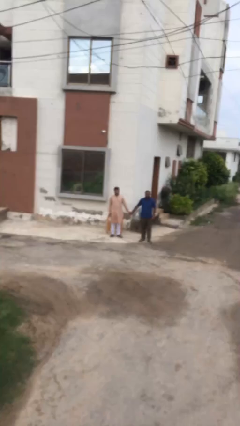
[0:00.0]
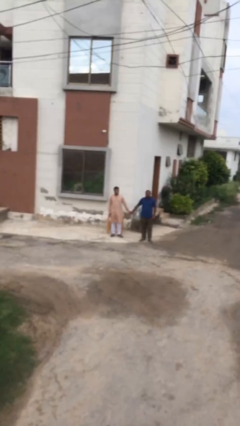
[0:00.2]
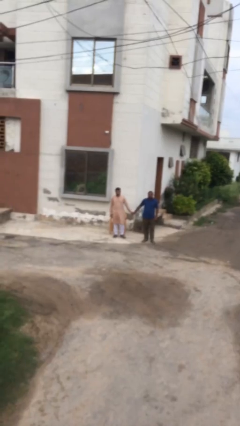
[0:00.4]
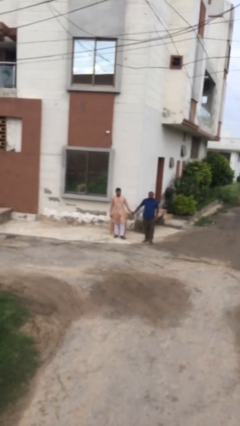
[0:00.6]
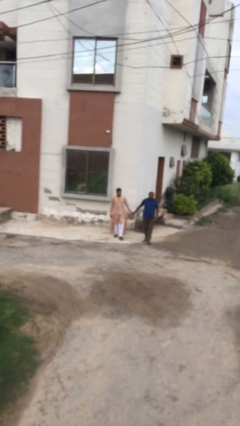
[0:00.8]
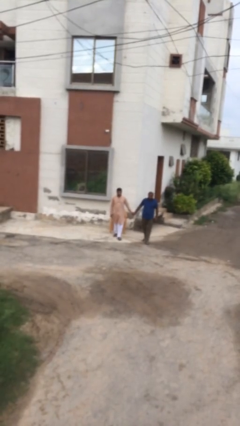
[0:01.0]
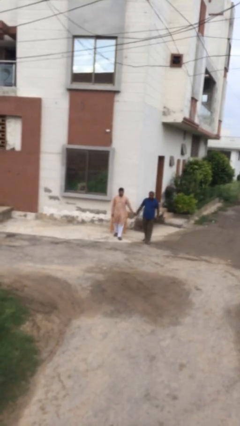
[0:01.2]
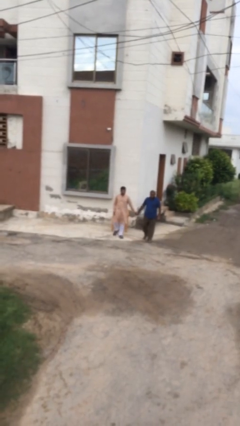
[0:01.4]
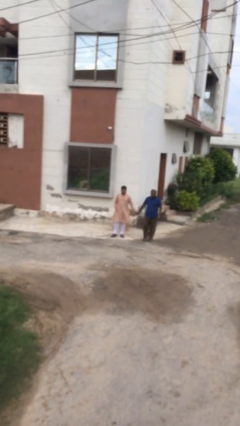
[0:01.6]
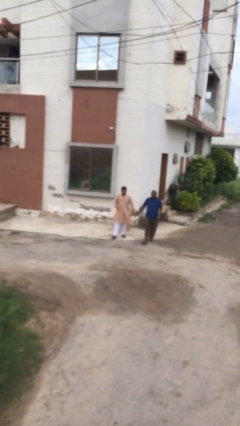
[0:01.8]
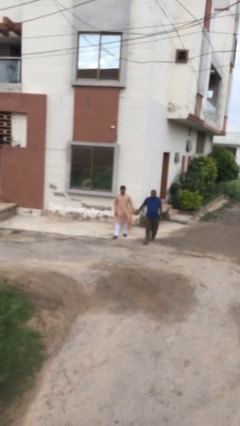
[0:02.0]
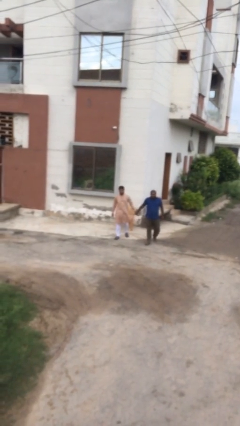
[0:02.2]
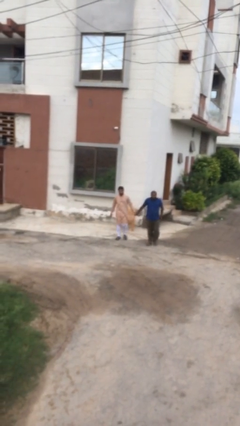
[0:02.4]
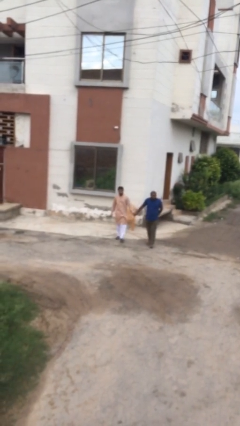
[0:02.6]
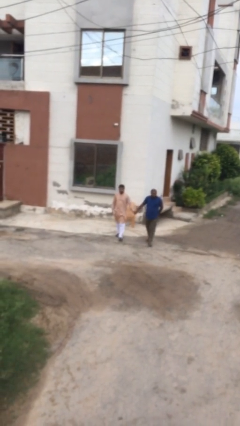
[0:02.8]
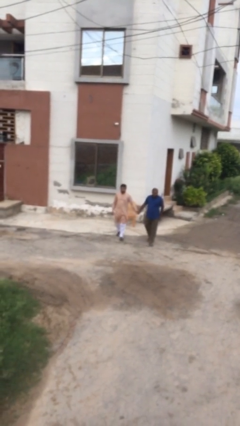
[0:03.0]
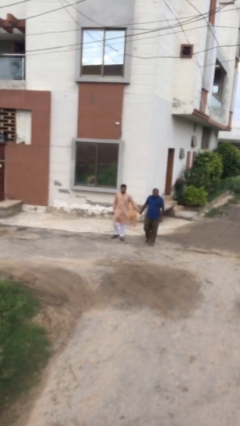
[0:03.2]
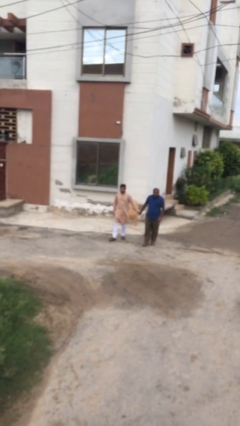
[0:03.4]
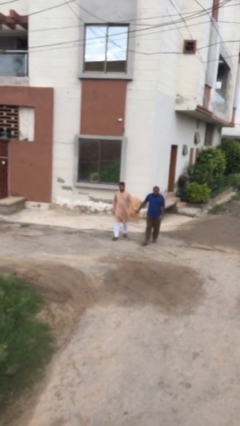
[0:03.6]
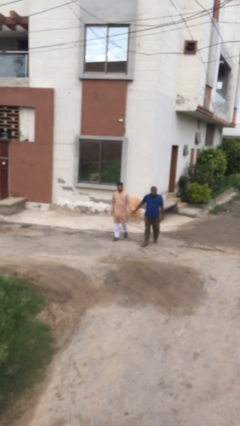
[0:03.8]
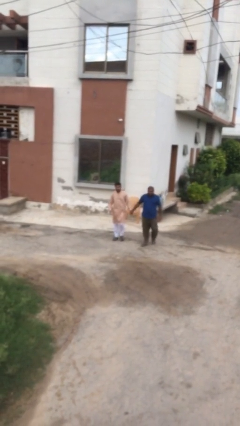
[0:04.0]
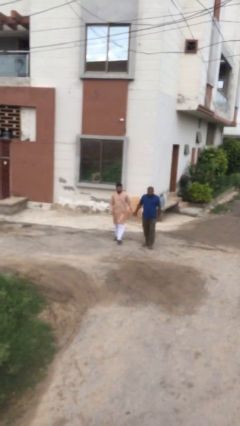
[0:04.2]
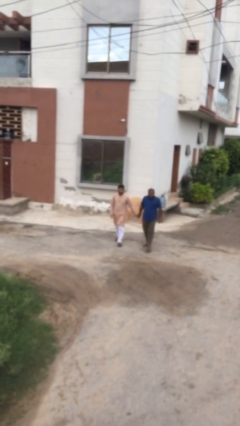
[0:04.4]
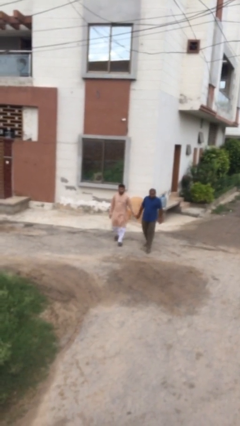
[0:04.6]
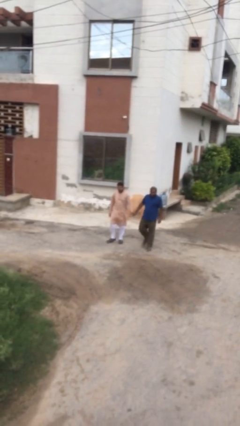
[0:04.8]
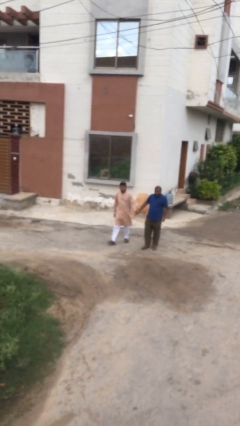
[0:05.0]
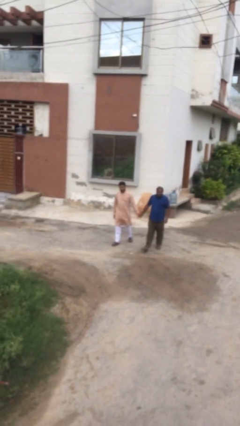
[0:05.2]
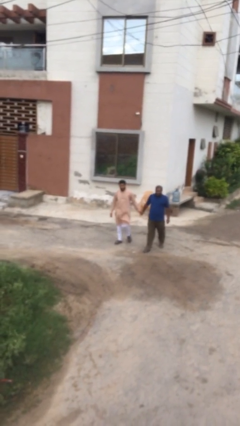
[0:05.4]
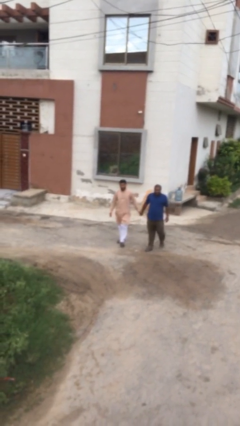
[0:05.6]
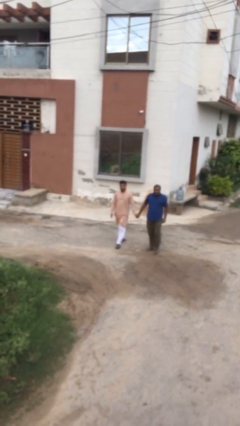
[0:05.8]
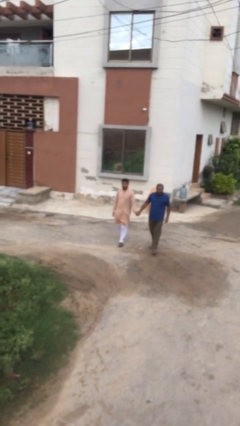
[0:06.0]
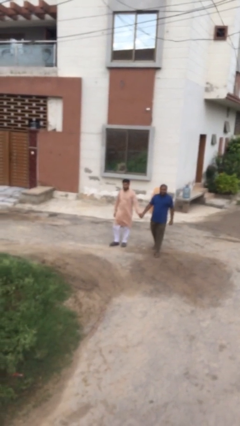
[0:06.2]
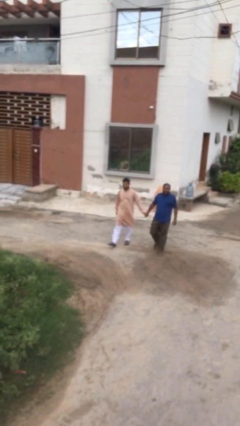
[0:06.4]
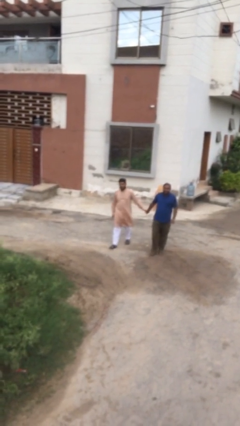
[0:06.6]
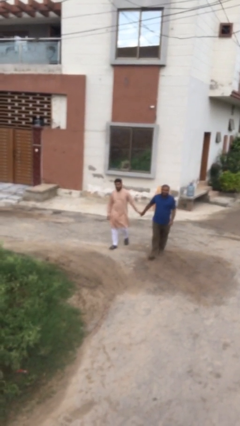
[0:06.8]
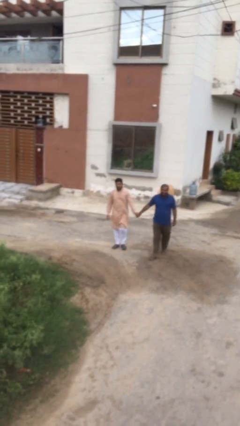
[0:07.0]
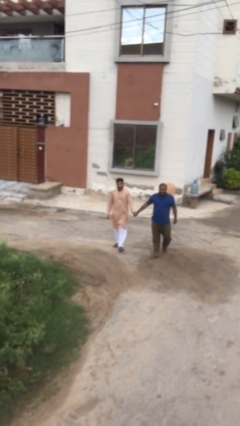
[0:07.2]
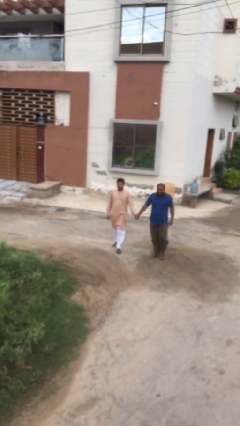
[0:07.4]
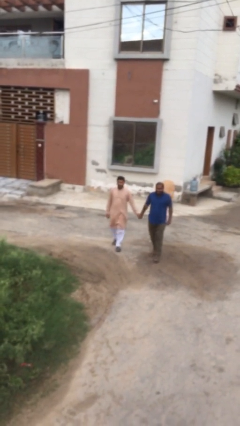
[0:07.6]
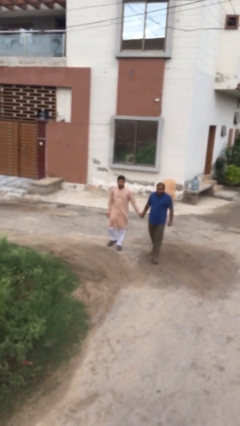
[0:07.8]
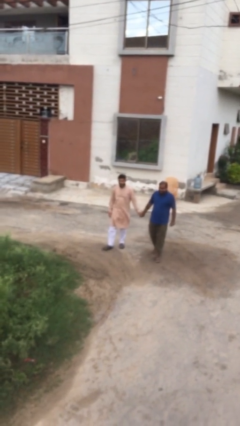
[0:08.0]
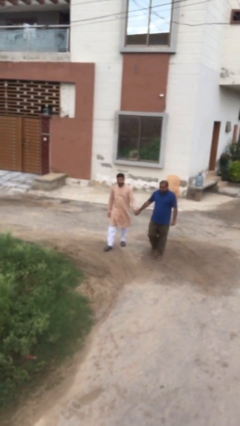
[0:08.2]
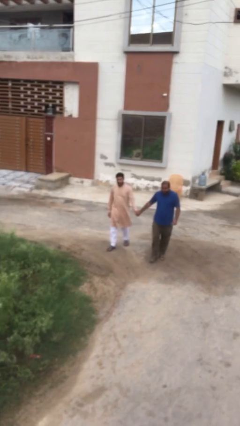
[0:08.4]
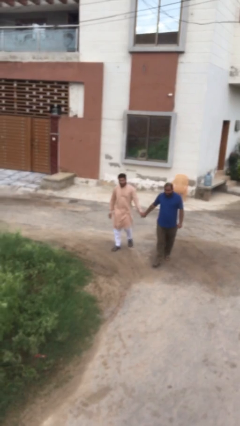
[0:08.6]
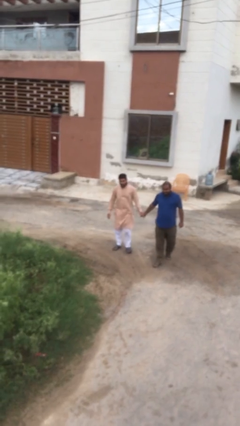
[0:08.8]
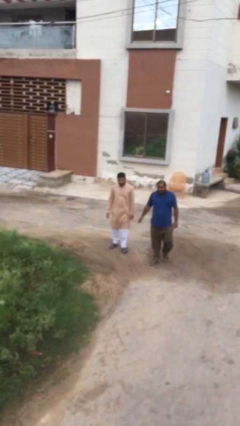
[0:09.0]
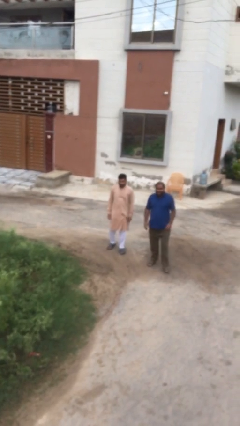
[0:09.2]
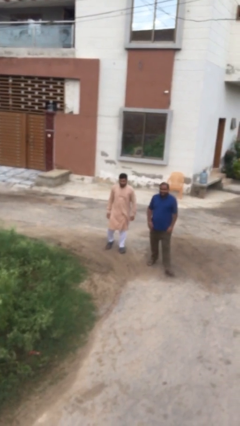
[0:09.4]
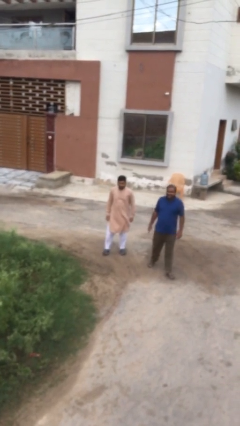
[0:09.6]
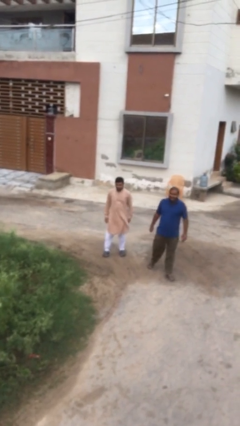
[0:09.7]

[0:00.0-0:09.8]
person holds hand

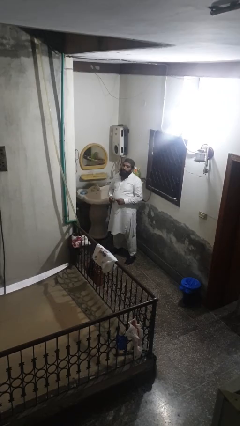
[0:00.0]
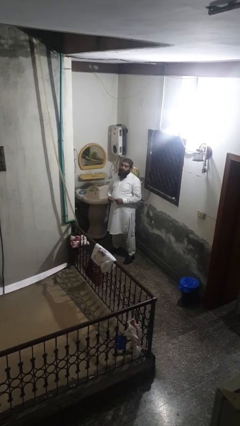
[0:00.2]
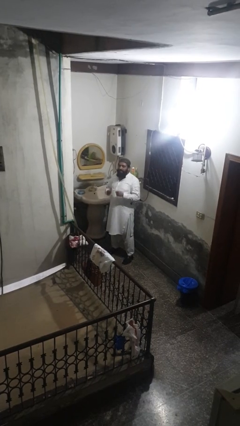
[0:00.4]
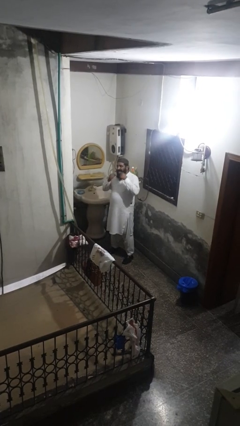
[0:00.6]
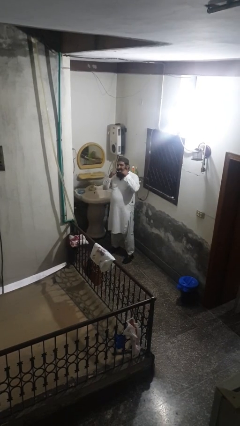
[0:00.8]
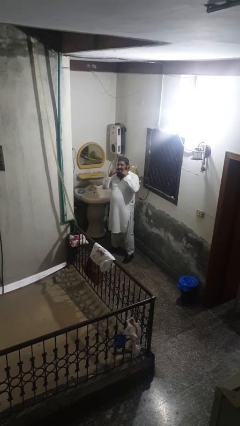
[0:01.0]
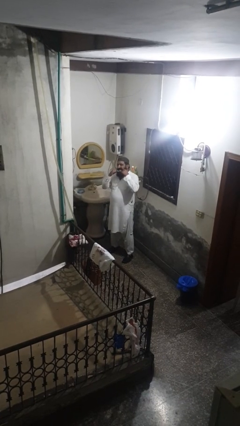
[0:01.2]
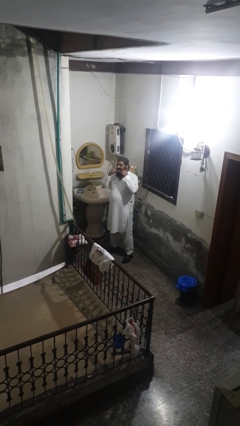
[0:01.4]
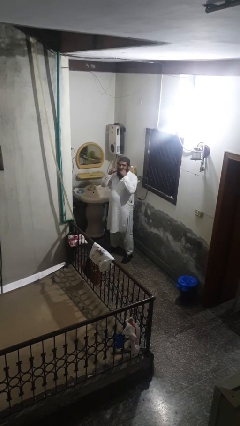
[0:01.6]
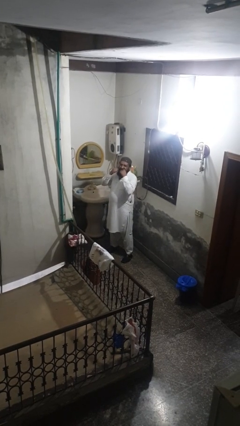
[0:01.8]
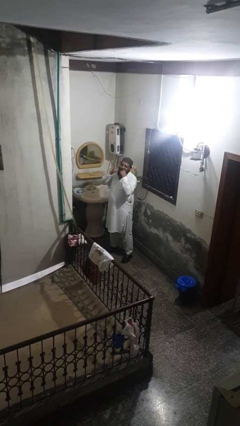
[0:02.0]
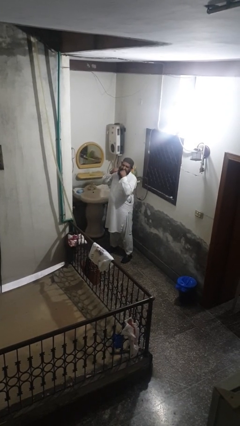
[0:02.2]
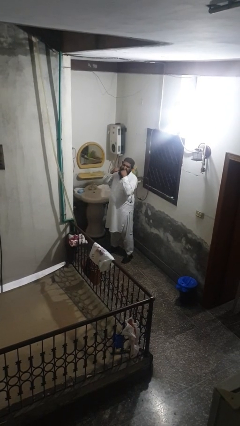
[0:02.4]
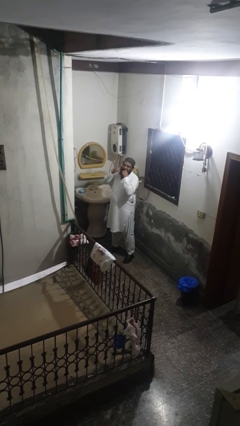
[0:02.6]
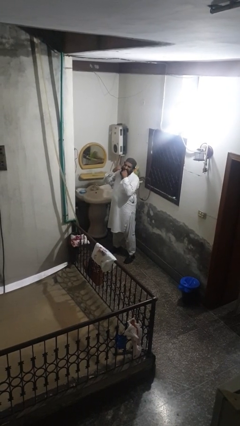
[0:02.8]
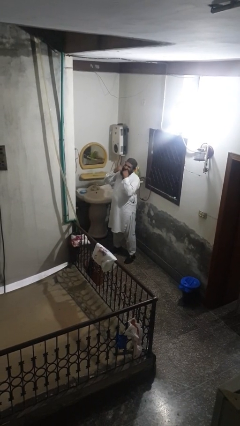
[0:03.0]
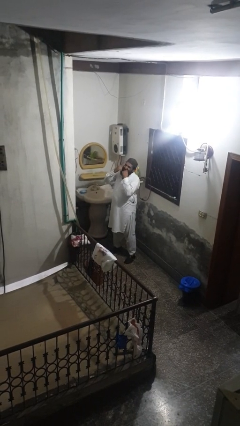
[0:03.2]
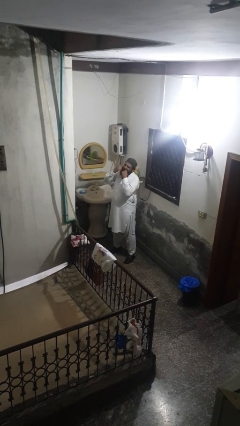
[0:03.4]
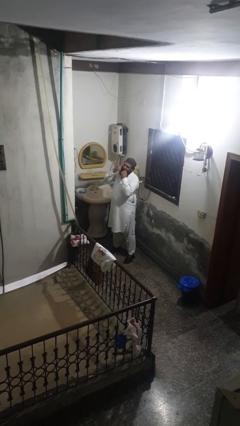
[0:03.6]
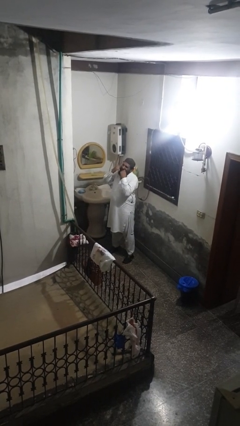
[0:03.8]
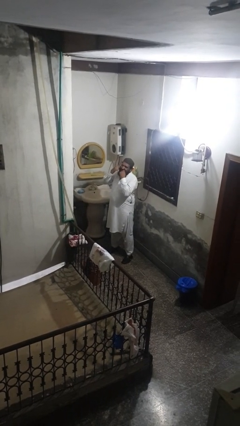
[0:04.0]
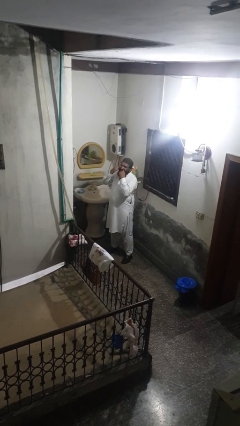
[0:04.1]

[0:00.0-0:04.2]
person flosses

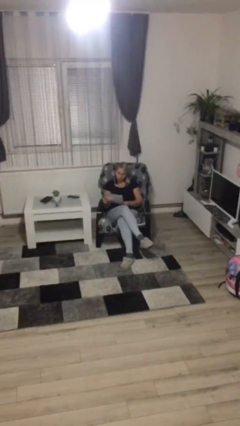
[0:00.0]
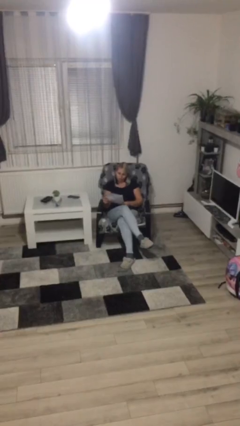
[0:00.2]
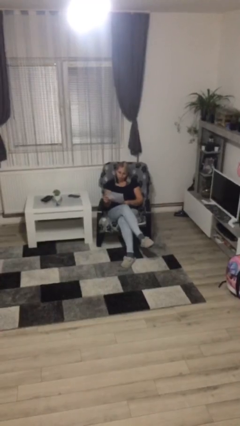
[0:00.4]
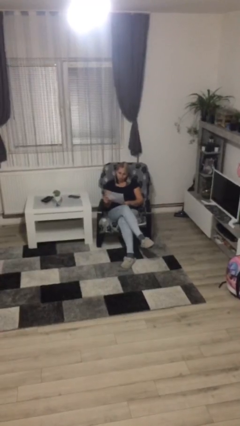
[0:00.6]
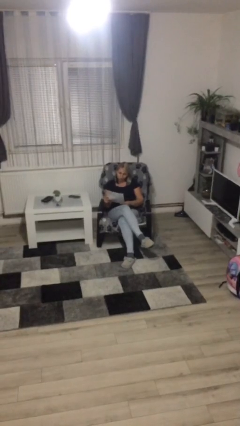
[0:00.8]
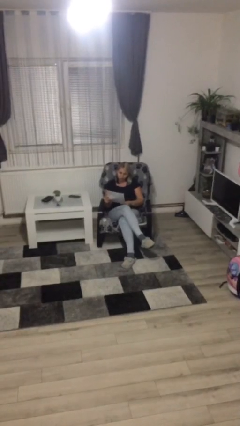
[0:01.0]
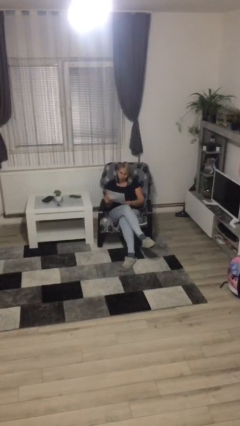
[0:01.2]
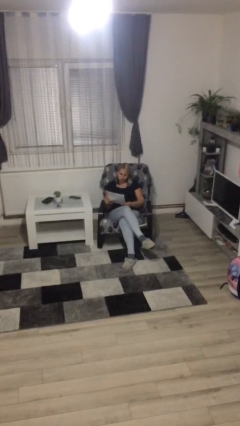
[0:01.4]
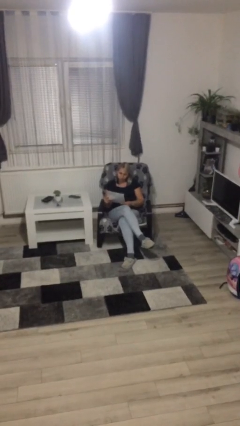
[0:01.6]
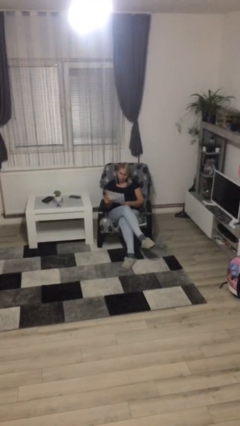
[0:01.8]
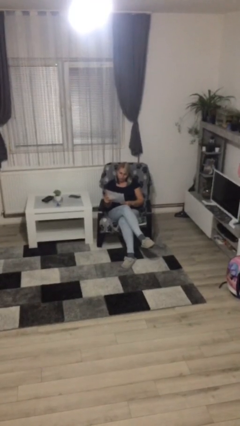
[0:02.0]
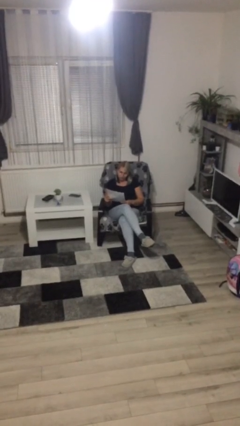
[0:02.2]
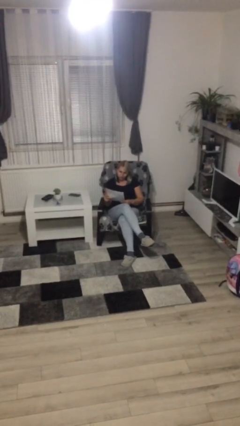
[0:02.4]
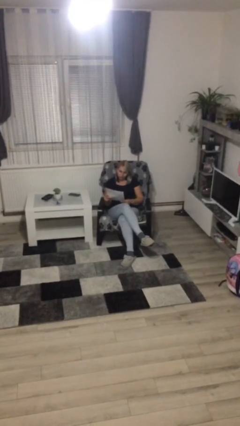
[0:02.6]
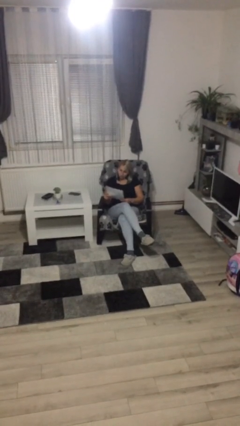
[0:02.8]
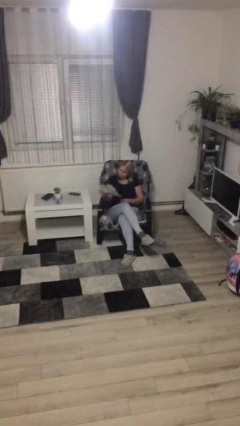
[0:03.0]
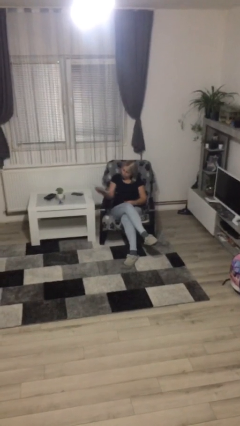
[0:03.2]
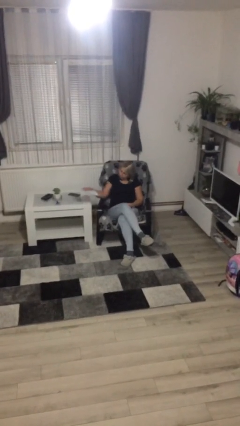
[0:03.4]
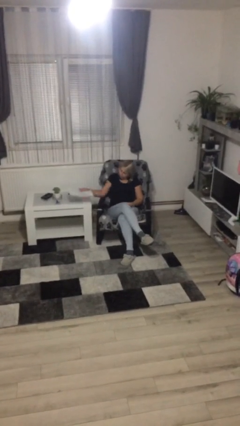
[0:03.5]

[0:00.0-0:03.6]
person reads document

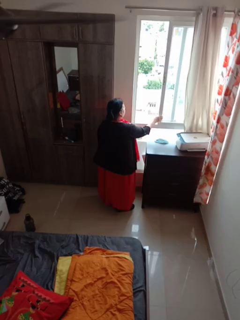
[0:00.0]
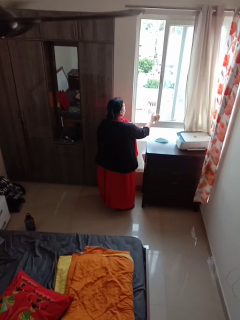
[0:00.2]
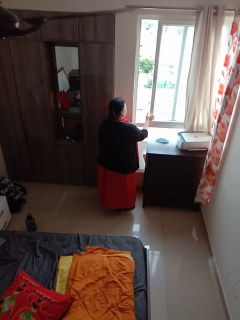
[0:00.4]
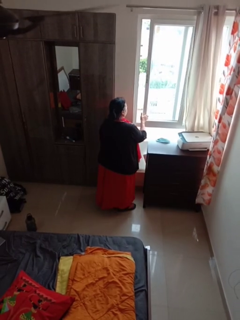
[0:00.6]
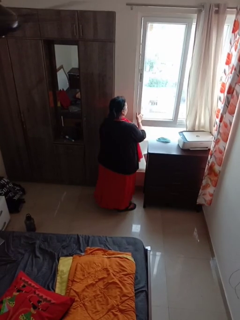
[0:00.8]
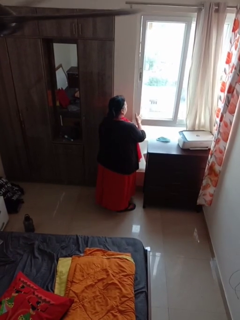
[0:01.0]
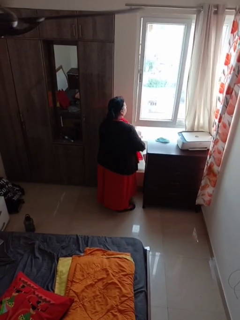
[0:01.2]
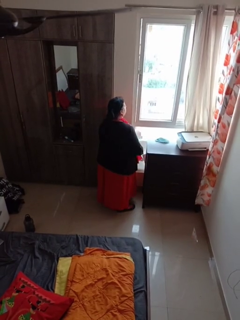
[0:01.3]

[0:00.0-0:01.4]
person closes home window
